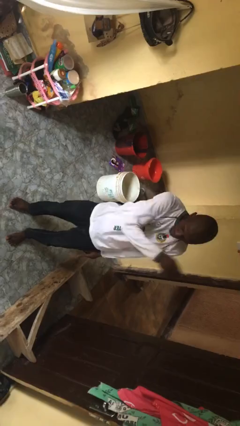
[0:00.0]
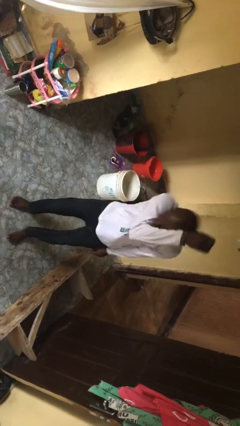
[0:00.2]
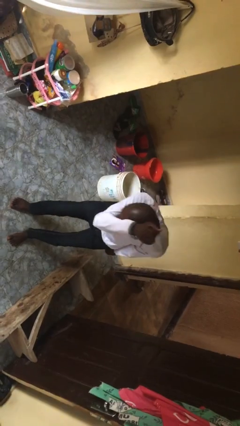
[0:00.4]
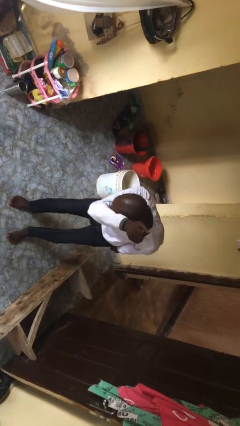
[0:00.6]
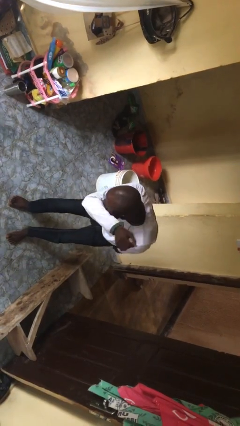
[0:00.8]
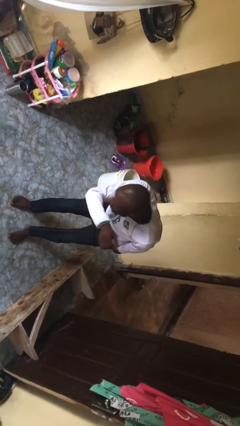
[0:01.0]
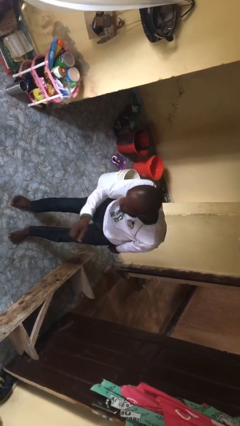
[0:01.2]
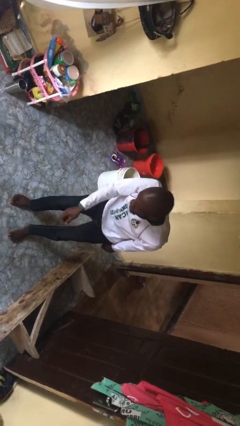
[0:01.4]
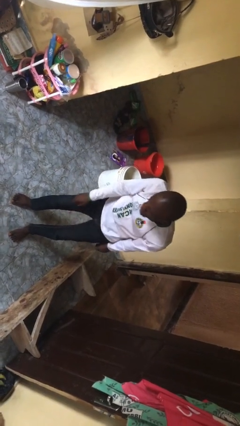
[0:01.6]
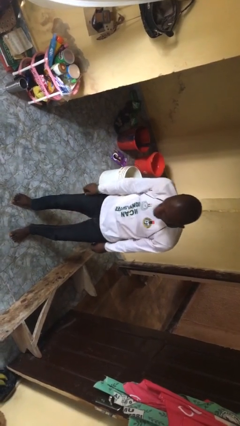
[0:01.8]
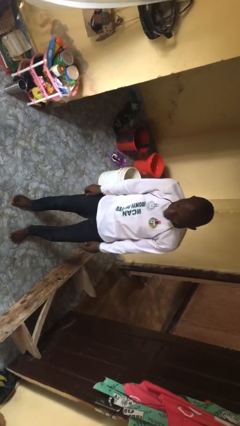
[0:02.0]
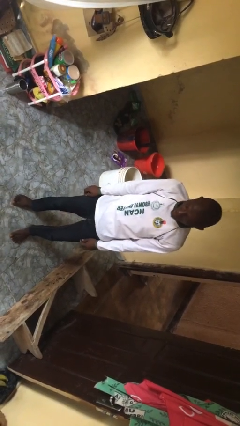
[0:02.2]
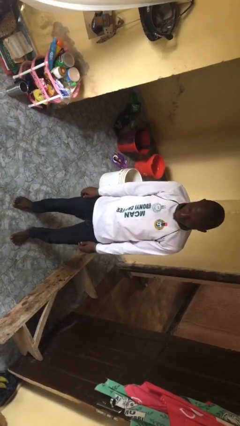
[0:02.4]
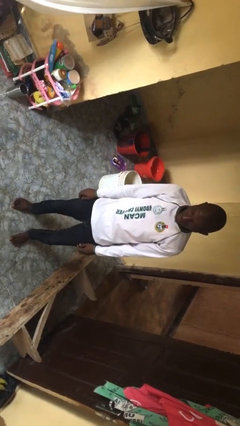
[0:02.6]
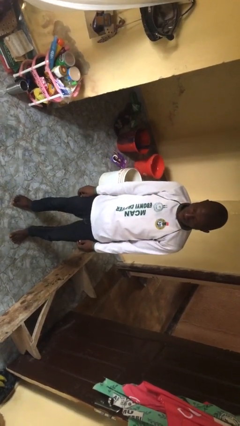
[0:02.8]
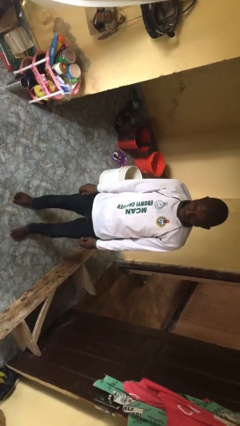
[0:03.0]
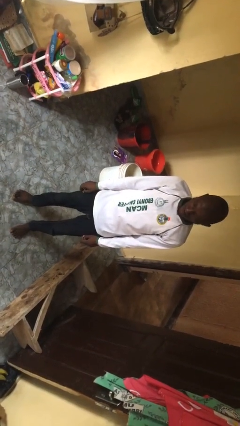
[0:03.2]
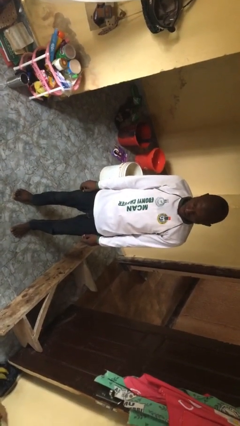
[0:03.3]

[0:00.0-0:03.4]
person sneezes into arm

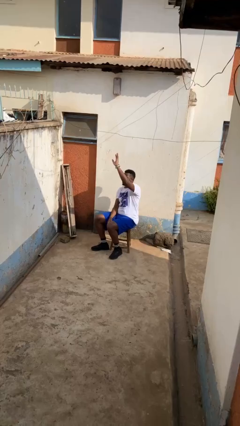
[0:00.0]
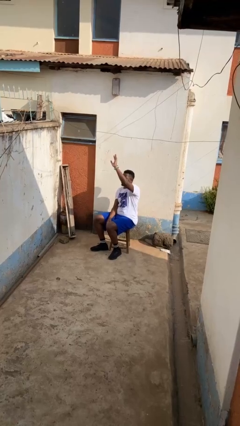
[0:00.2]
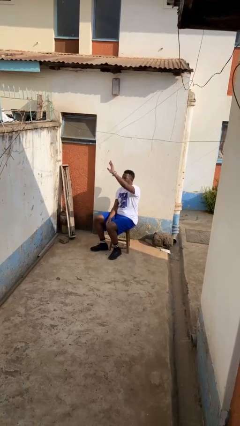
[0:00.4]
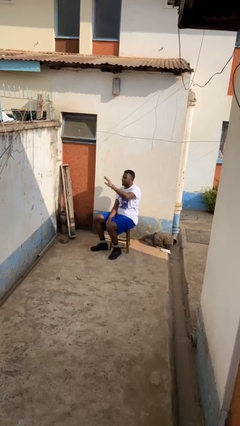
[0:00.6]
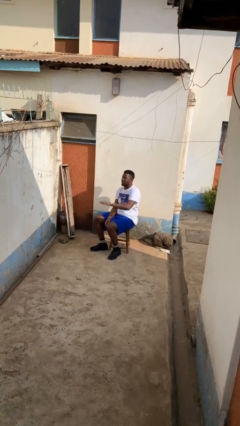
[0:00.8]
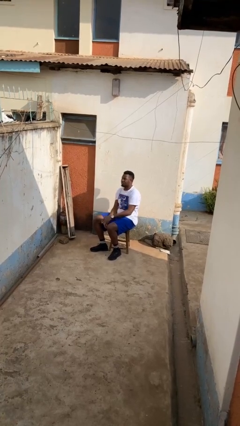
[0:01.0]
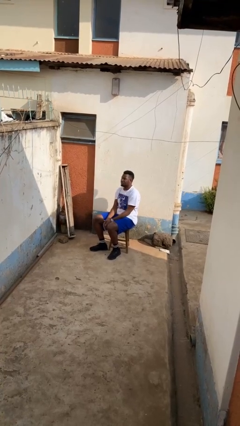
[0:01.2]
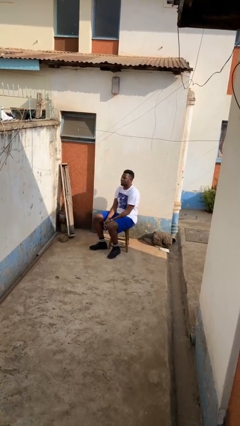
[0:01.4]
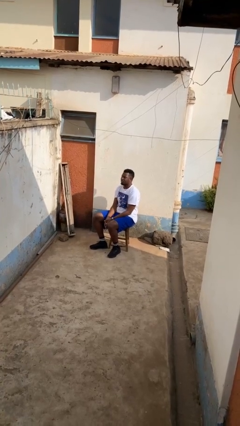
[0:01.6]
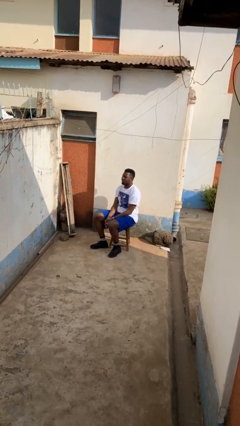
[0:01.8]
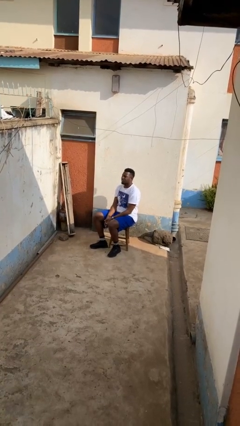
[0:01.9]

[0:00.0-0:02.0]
person gestures lower hand

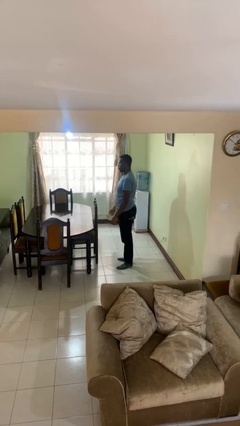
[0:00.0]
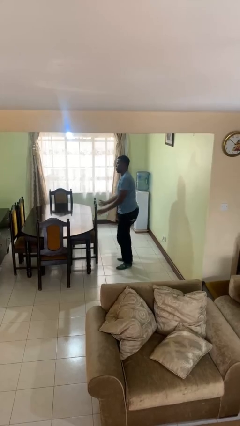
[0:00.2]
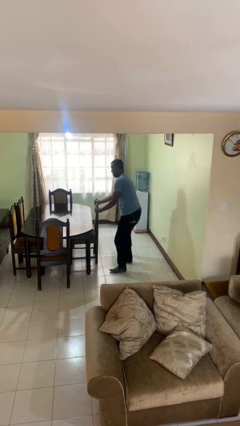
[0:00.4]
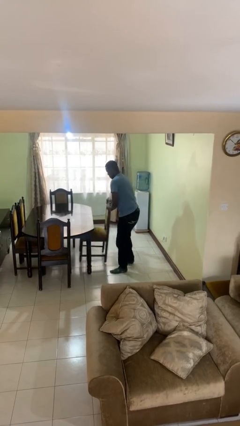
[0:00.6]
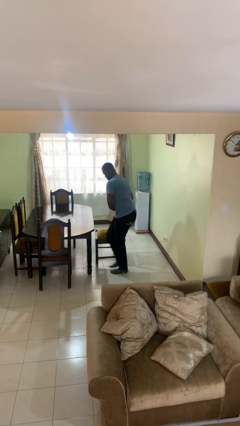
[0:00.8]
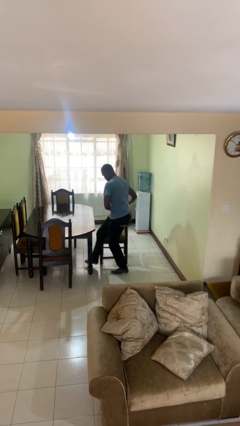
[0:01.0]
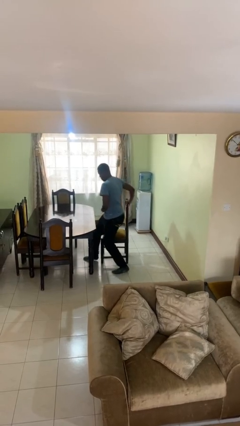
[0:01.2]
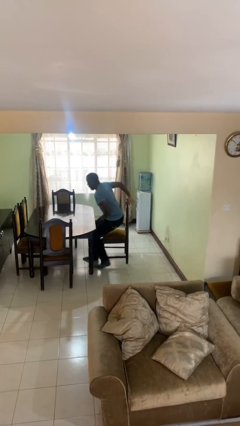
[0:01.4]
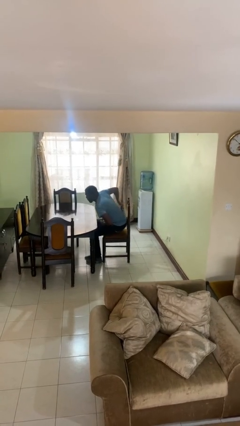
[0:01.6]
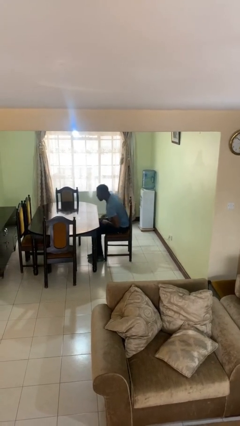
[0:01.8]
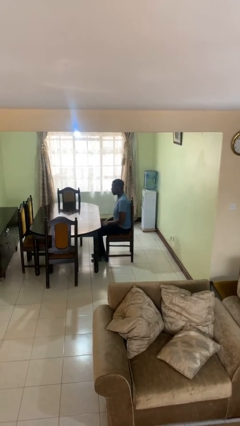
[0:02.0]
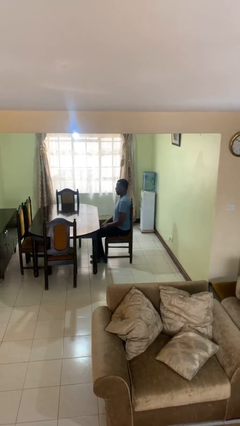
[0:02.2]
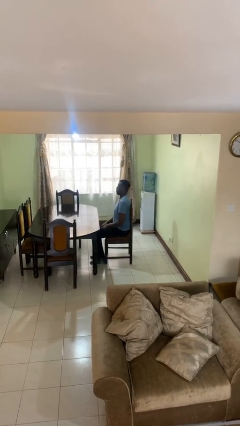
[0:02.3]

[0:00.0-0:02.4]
person sits down

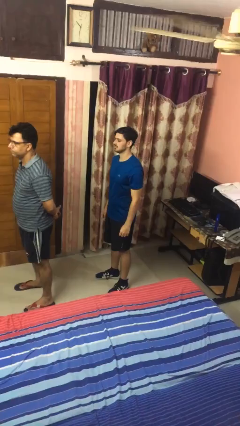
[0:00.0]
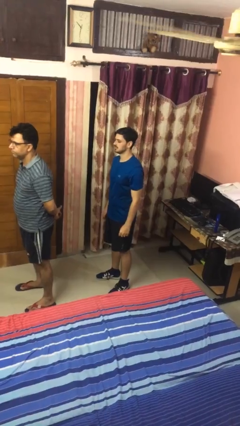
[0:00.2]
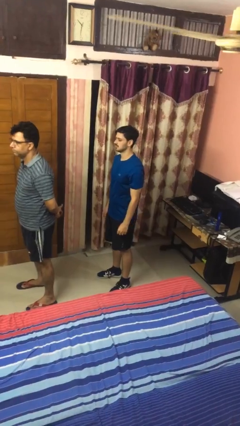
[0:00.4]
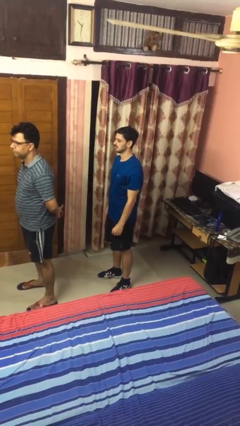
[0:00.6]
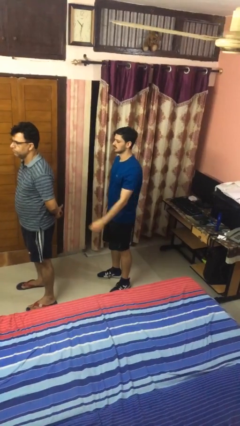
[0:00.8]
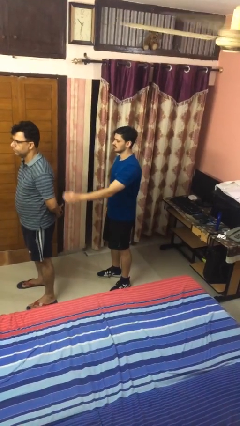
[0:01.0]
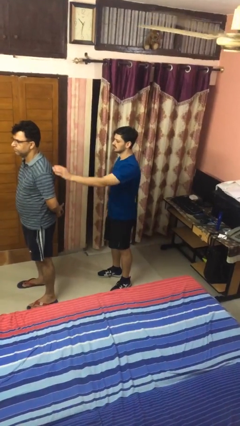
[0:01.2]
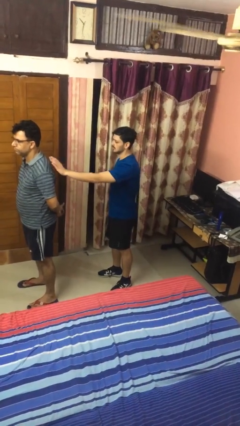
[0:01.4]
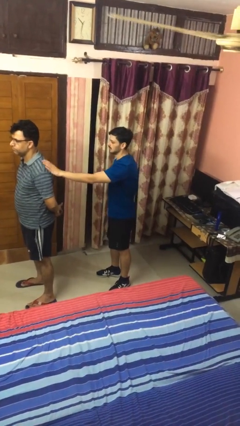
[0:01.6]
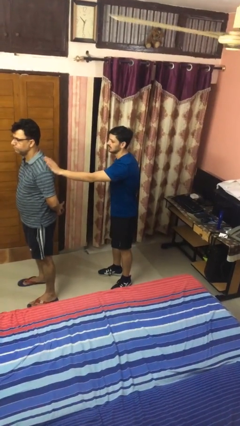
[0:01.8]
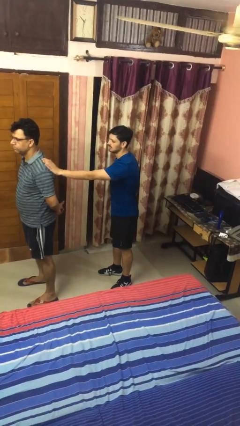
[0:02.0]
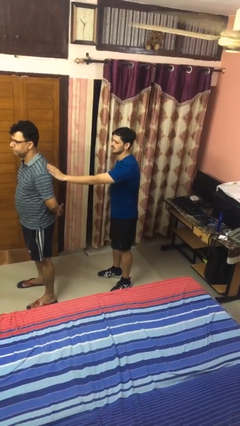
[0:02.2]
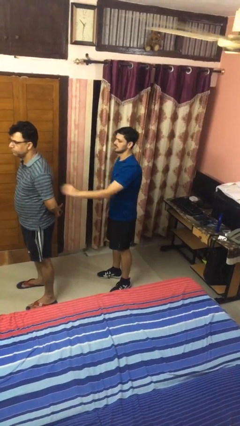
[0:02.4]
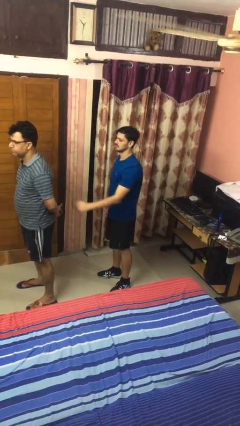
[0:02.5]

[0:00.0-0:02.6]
person touches back of person

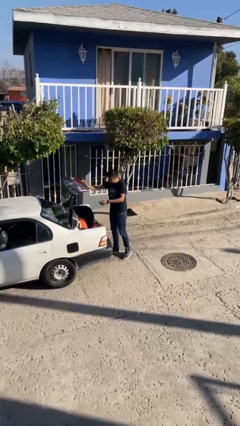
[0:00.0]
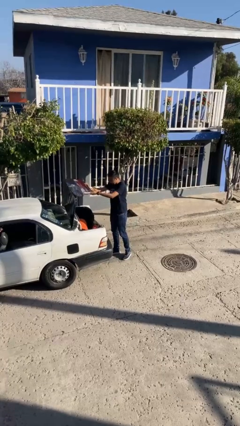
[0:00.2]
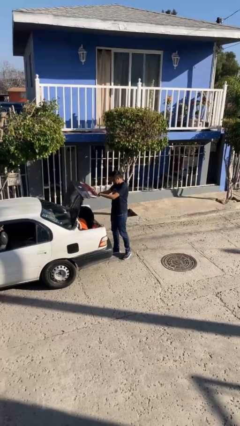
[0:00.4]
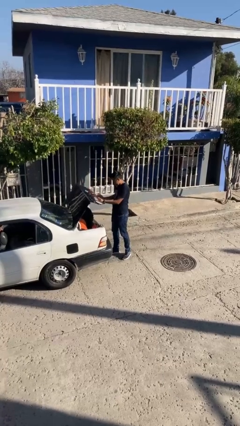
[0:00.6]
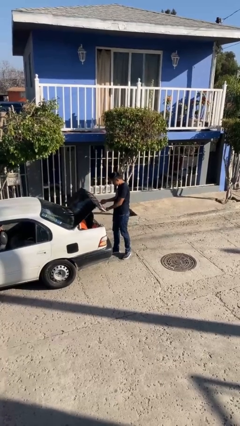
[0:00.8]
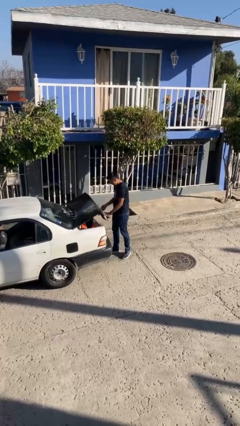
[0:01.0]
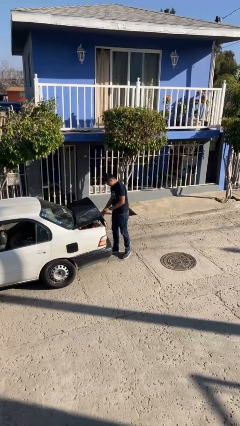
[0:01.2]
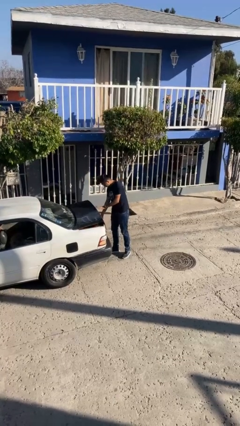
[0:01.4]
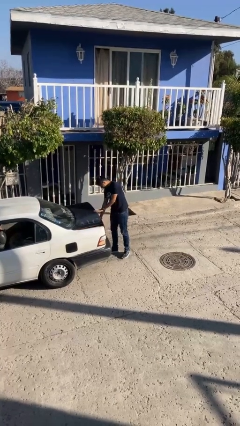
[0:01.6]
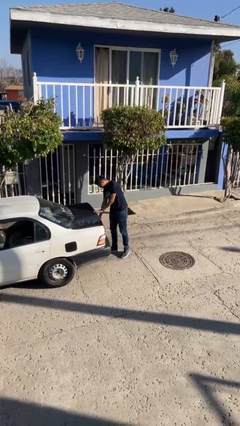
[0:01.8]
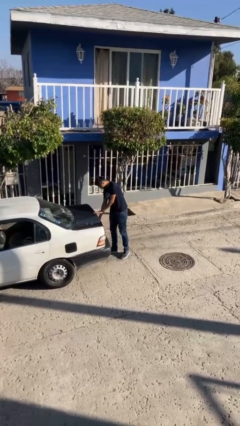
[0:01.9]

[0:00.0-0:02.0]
person closes car trunk

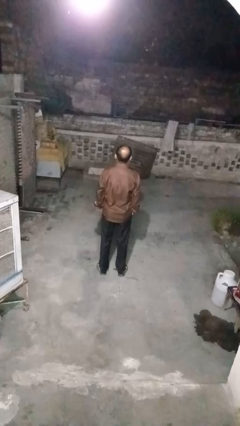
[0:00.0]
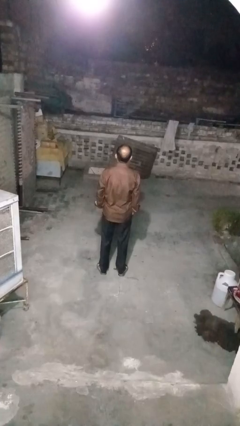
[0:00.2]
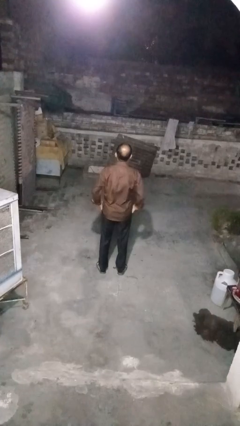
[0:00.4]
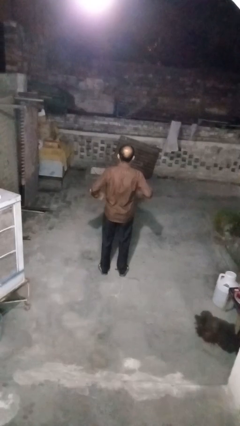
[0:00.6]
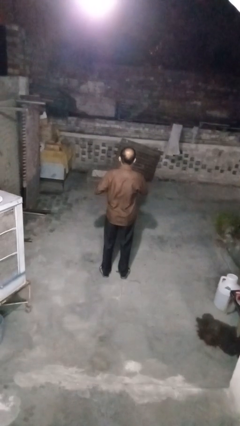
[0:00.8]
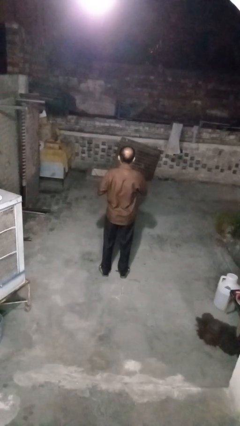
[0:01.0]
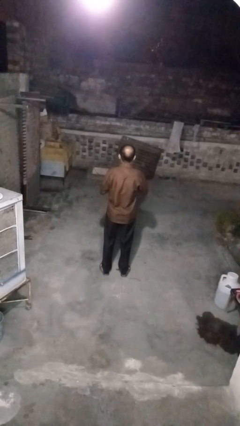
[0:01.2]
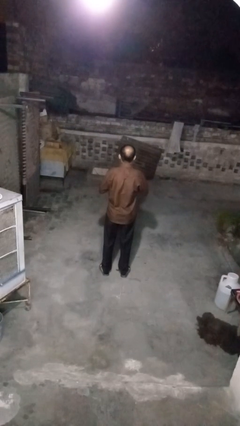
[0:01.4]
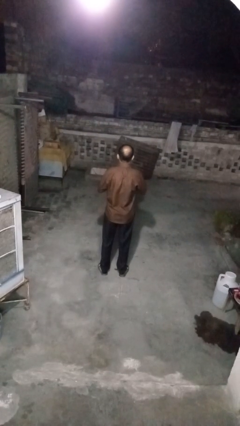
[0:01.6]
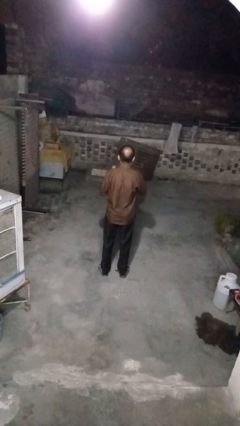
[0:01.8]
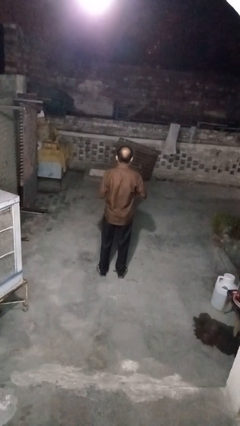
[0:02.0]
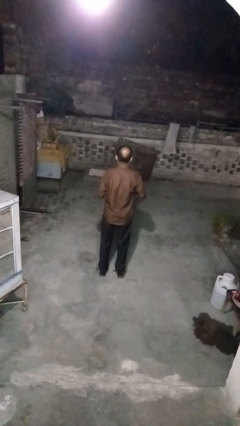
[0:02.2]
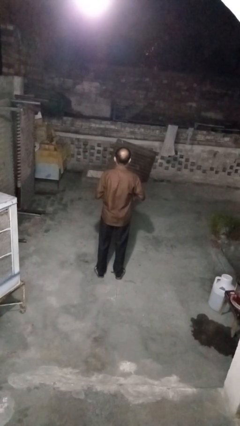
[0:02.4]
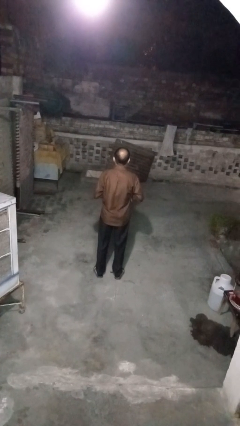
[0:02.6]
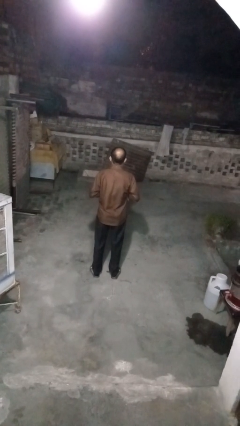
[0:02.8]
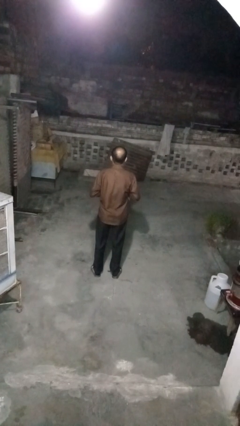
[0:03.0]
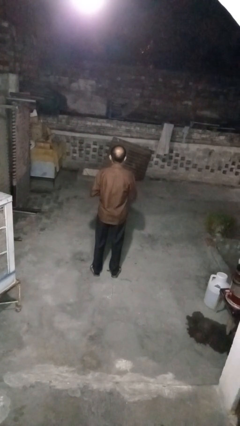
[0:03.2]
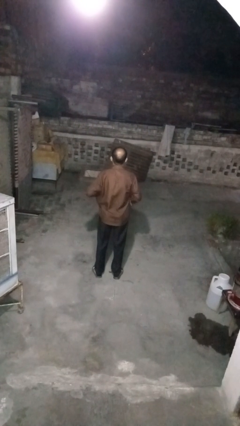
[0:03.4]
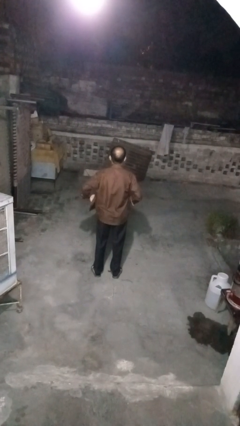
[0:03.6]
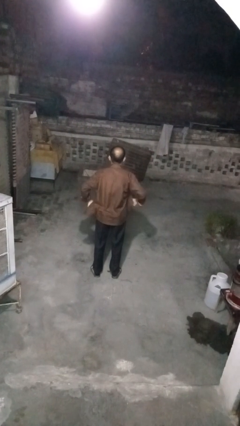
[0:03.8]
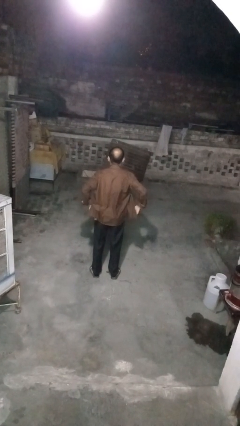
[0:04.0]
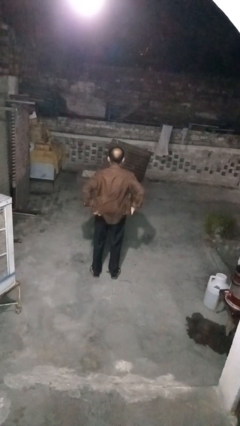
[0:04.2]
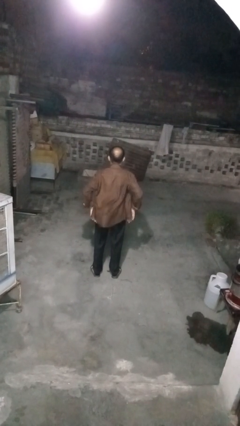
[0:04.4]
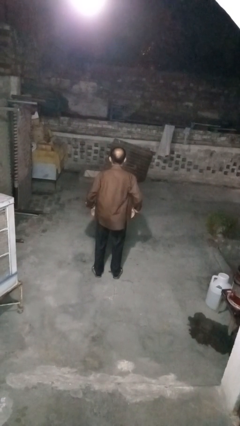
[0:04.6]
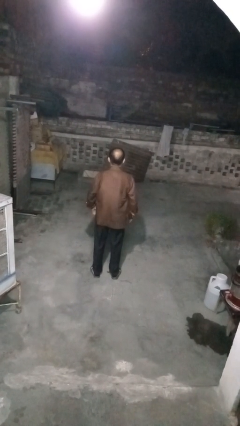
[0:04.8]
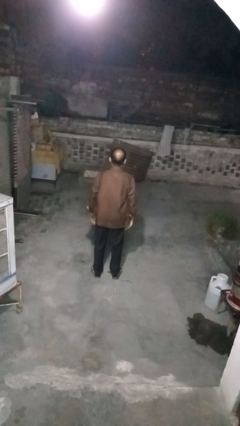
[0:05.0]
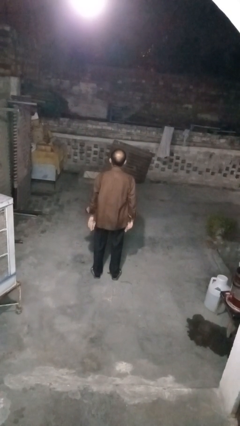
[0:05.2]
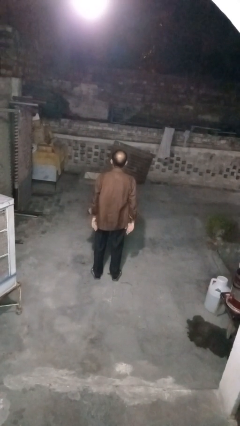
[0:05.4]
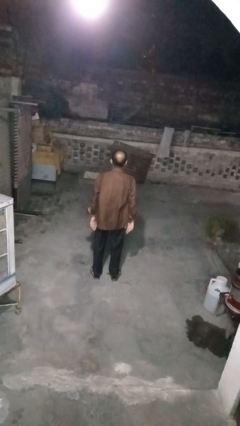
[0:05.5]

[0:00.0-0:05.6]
person unbuttons shirt
